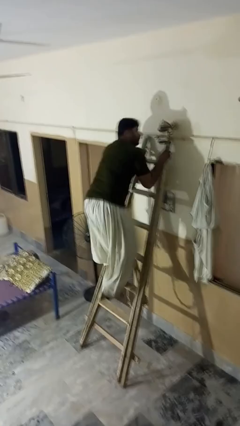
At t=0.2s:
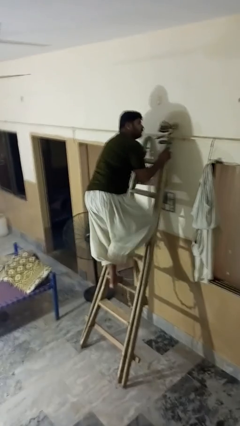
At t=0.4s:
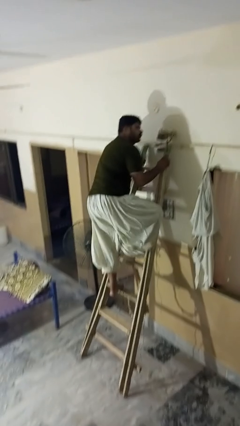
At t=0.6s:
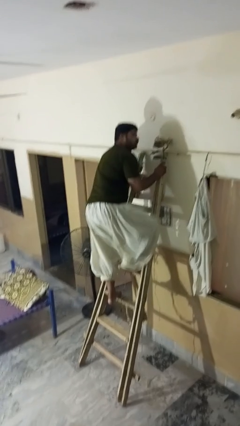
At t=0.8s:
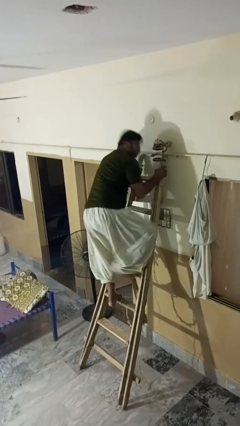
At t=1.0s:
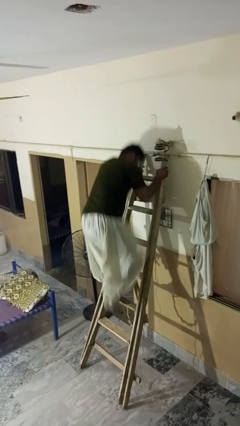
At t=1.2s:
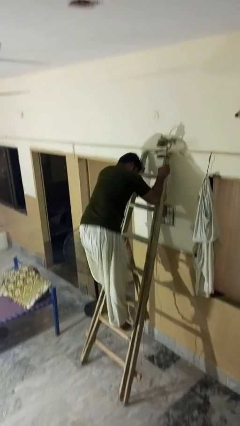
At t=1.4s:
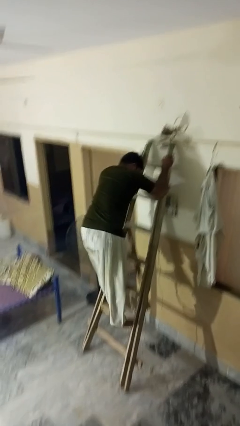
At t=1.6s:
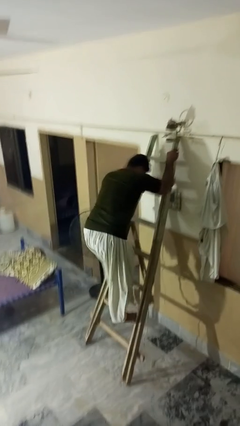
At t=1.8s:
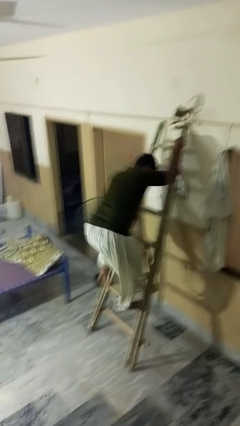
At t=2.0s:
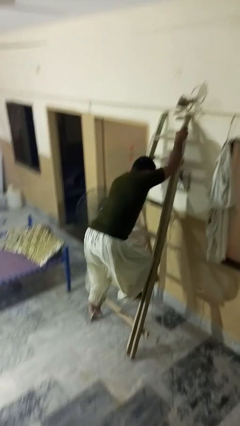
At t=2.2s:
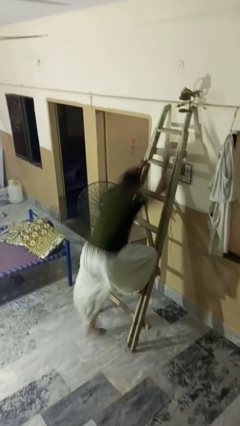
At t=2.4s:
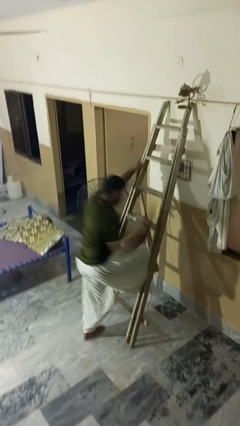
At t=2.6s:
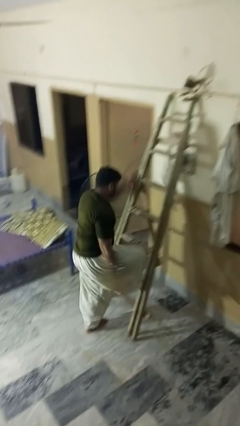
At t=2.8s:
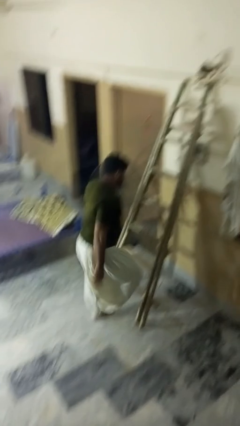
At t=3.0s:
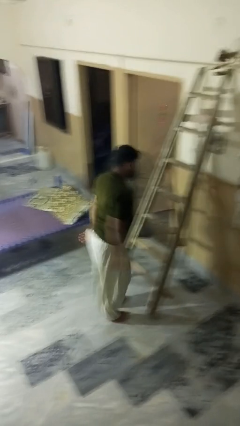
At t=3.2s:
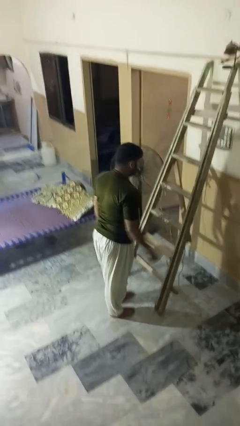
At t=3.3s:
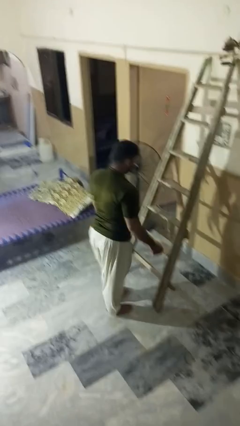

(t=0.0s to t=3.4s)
person climbs down ladder

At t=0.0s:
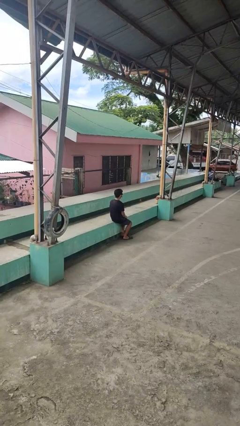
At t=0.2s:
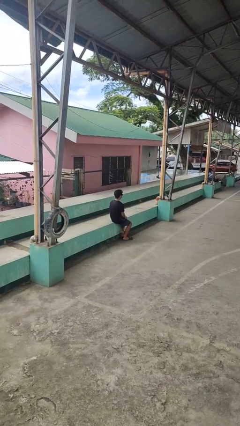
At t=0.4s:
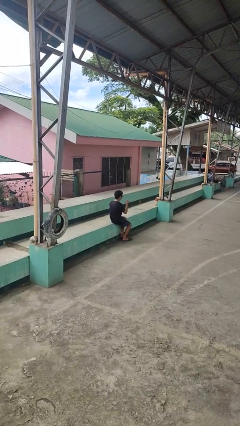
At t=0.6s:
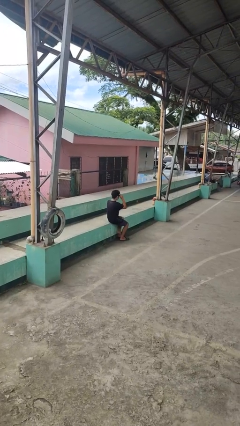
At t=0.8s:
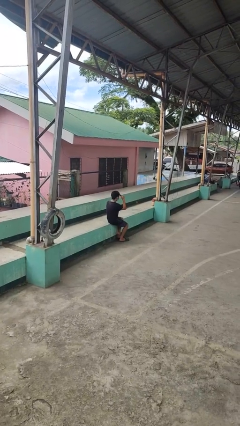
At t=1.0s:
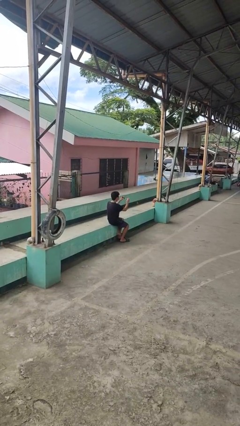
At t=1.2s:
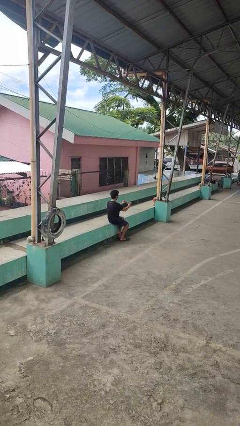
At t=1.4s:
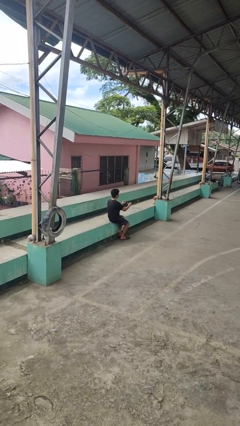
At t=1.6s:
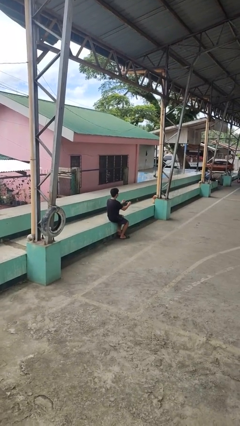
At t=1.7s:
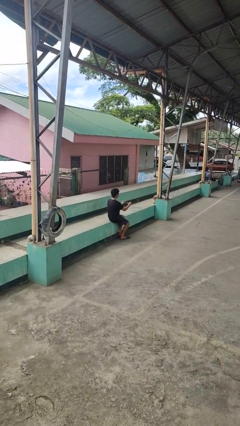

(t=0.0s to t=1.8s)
person takes off sunglasses

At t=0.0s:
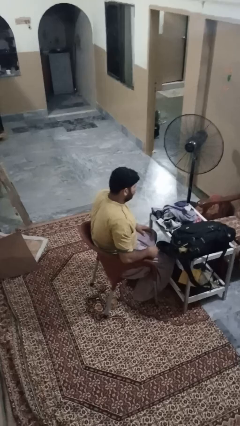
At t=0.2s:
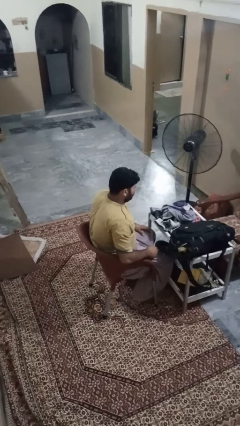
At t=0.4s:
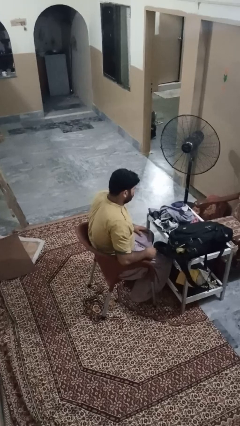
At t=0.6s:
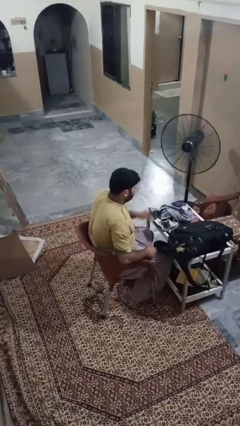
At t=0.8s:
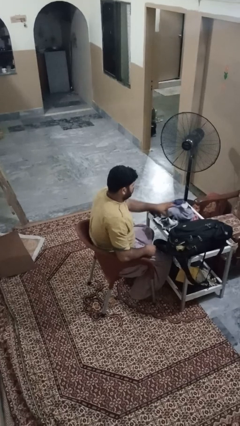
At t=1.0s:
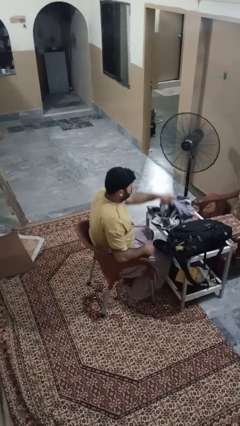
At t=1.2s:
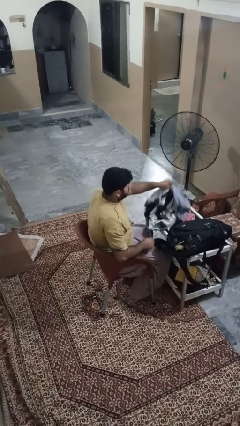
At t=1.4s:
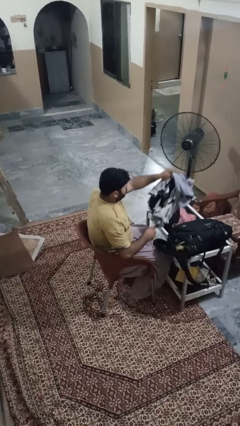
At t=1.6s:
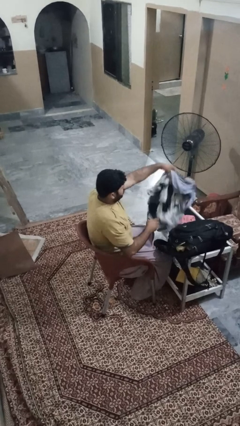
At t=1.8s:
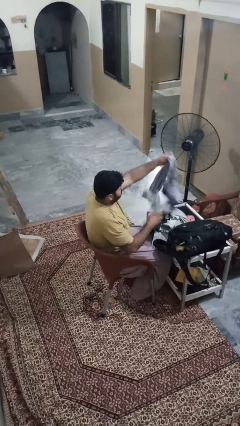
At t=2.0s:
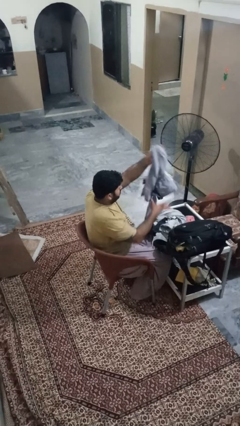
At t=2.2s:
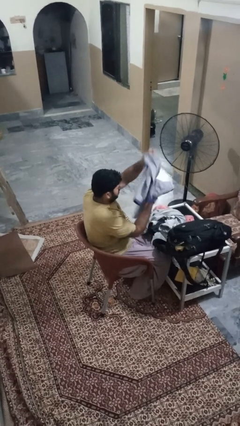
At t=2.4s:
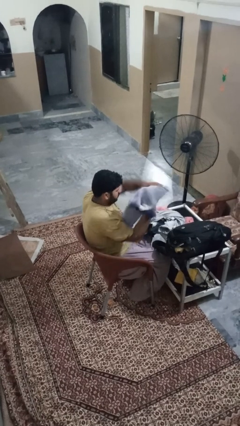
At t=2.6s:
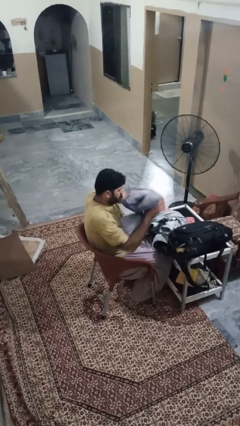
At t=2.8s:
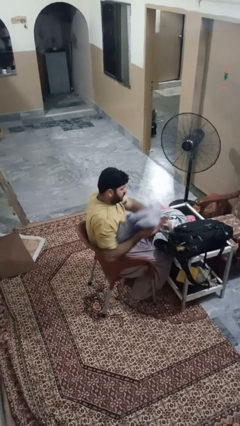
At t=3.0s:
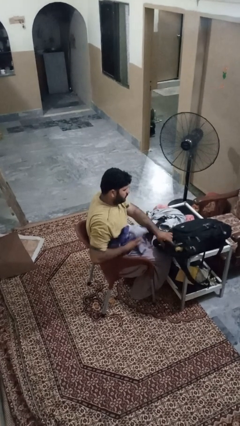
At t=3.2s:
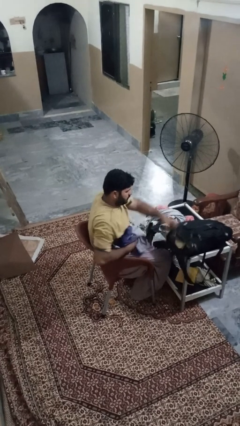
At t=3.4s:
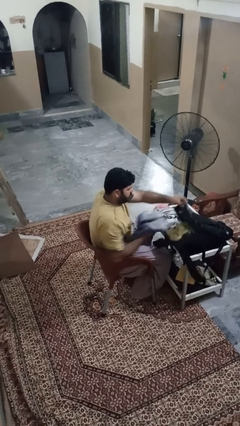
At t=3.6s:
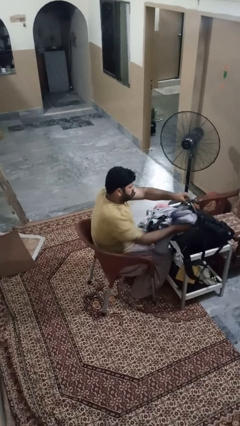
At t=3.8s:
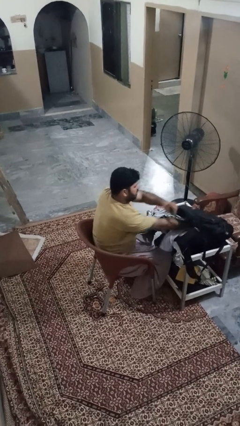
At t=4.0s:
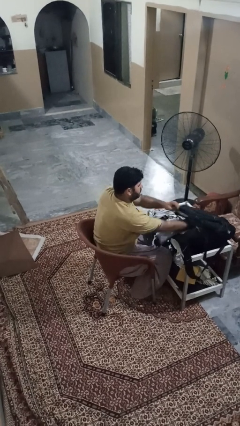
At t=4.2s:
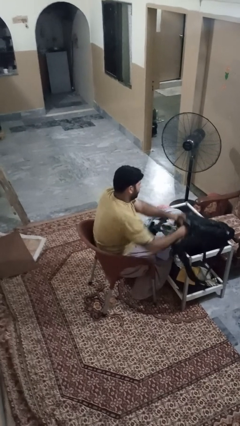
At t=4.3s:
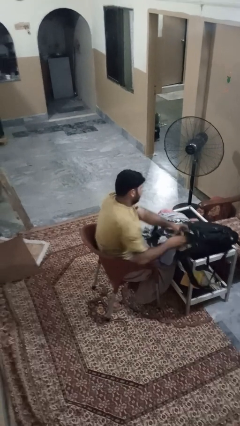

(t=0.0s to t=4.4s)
person loads clothes into suitcase

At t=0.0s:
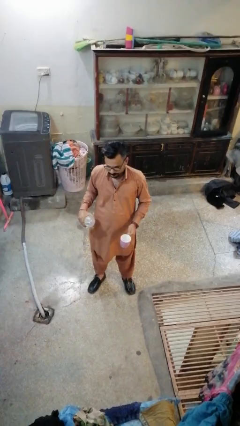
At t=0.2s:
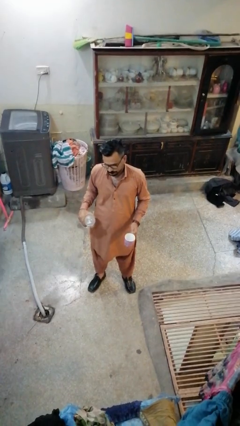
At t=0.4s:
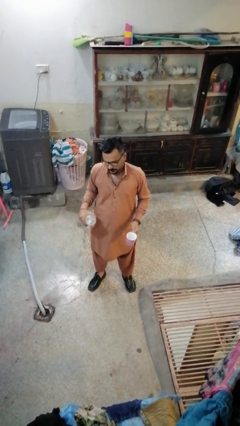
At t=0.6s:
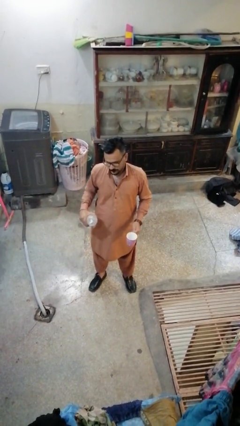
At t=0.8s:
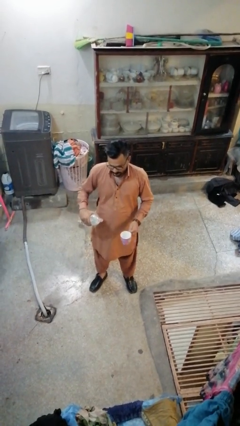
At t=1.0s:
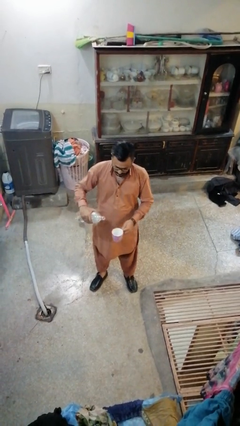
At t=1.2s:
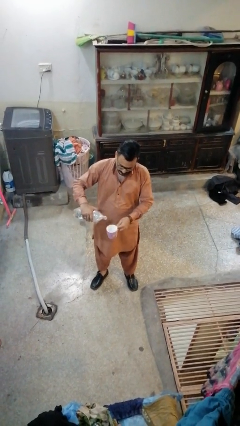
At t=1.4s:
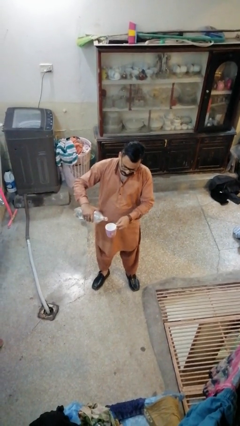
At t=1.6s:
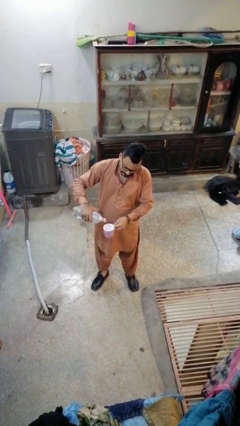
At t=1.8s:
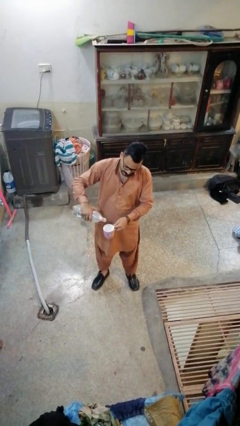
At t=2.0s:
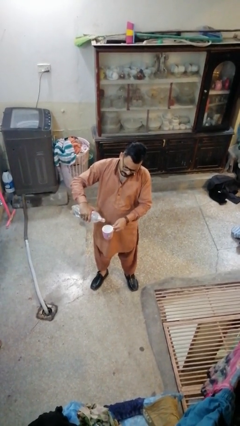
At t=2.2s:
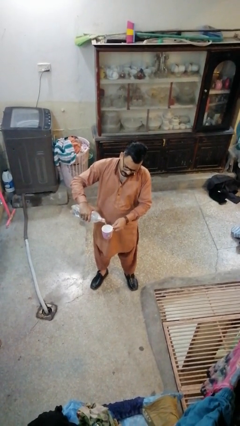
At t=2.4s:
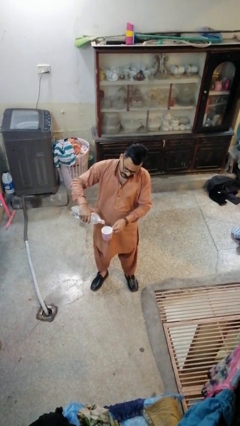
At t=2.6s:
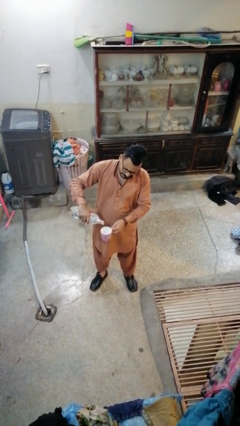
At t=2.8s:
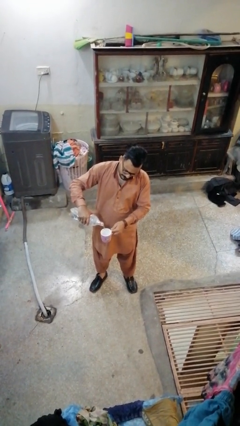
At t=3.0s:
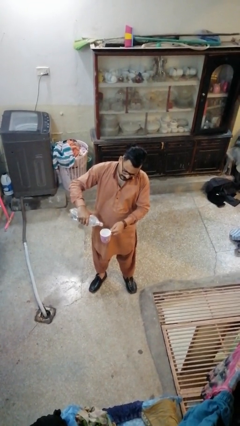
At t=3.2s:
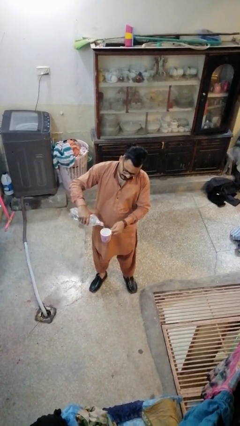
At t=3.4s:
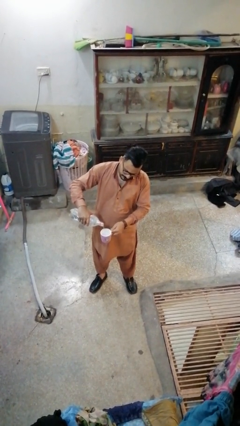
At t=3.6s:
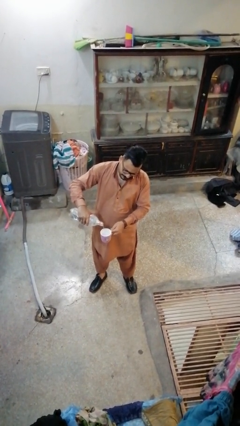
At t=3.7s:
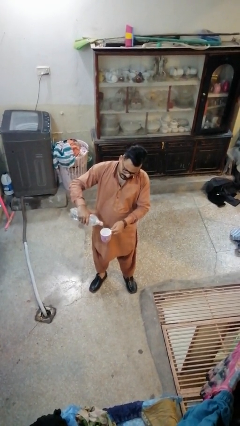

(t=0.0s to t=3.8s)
person pours liquid into cup

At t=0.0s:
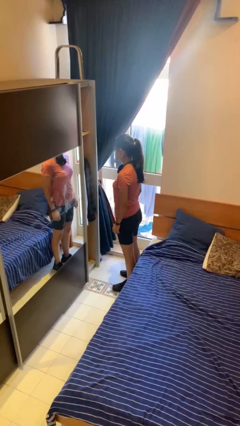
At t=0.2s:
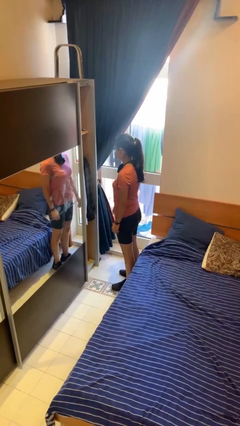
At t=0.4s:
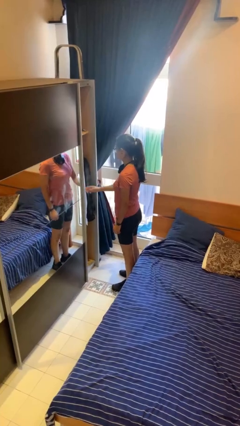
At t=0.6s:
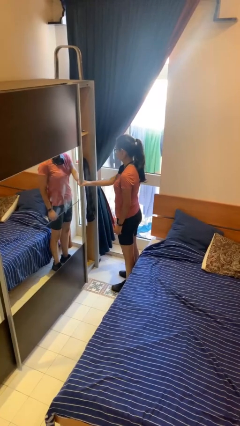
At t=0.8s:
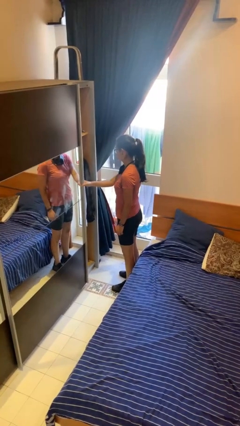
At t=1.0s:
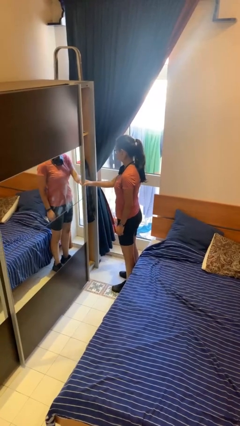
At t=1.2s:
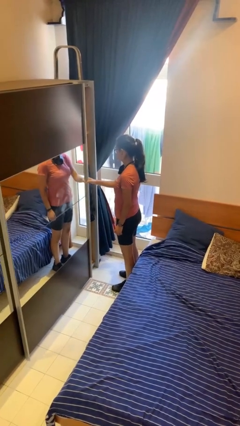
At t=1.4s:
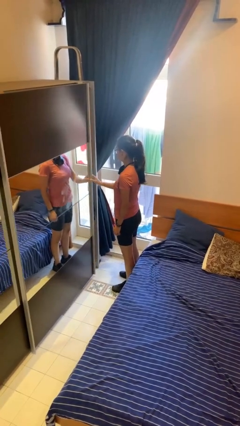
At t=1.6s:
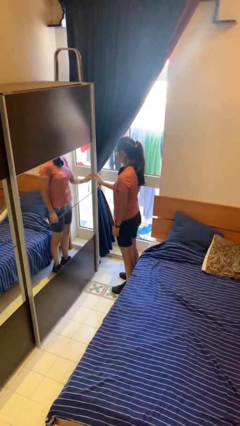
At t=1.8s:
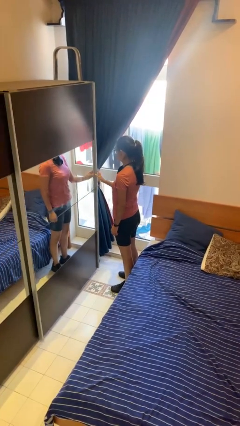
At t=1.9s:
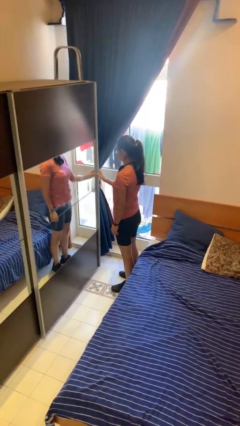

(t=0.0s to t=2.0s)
person closes closet door

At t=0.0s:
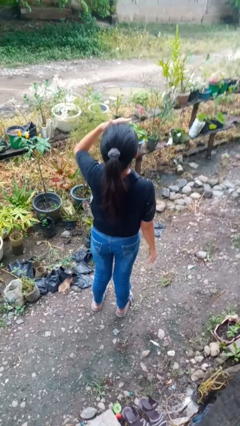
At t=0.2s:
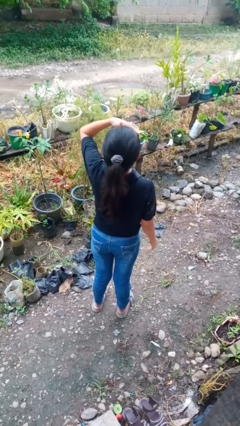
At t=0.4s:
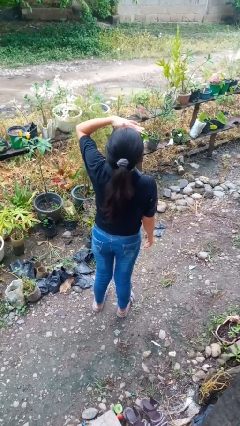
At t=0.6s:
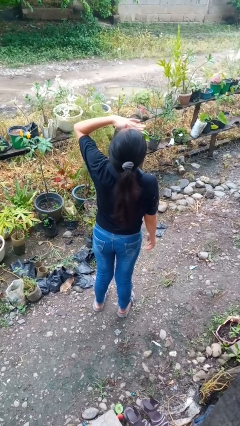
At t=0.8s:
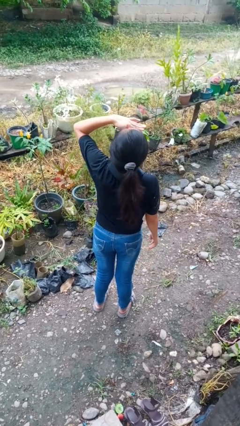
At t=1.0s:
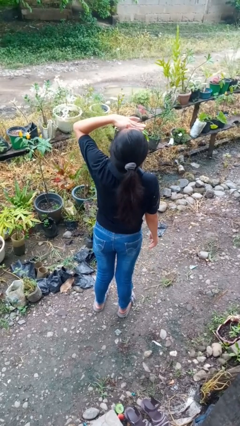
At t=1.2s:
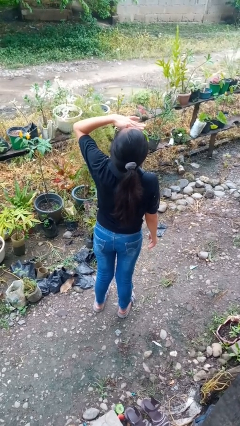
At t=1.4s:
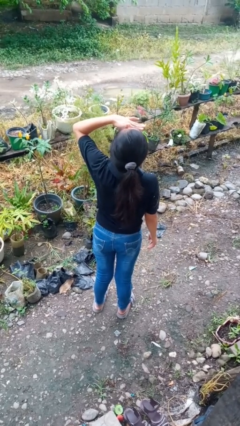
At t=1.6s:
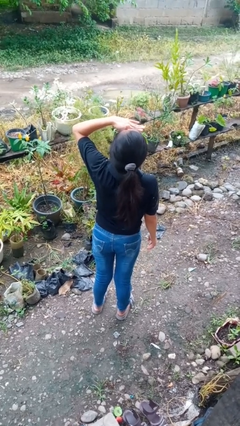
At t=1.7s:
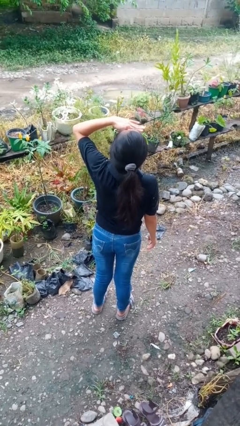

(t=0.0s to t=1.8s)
person shades eyes
